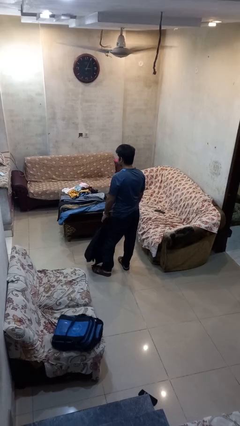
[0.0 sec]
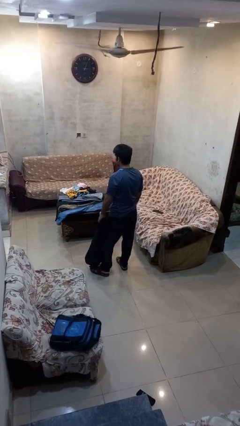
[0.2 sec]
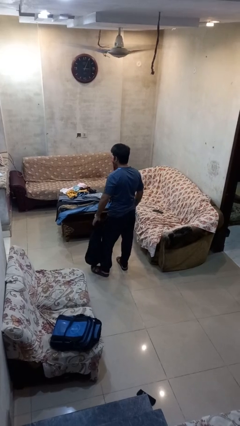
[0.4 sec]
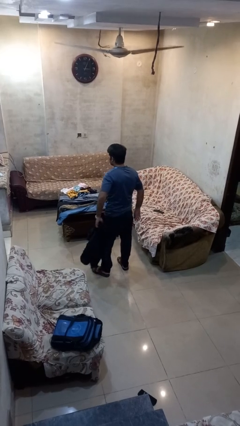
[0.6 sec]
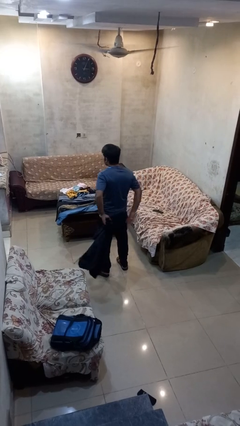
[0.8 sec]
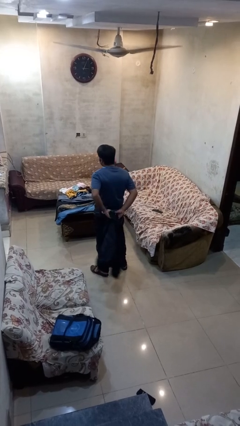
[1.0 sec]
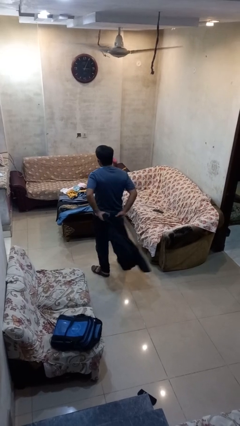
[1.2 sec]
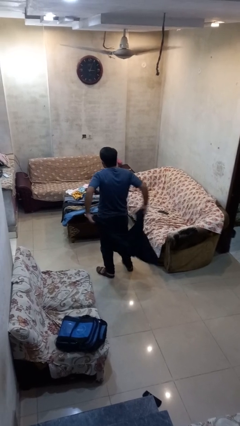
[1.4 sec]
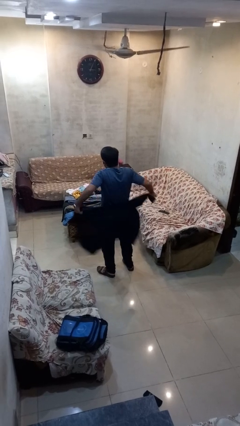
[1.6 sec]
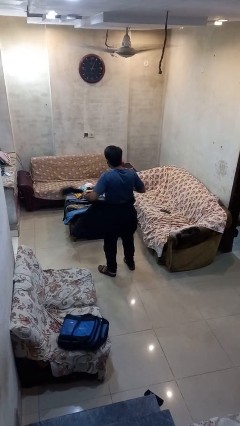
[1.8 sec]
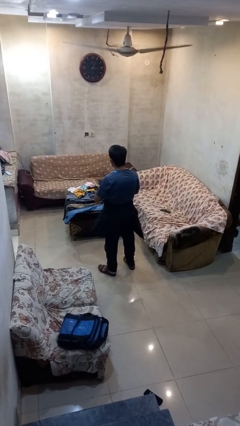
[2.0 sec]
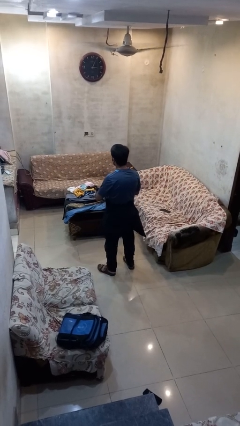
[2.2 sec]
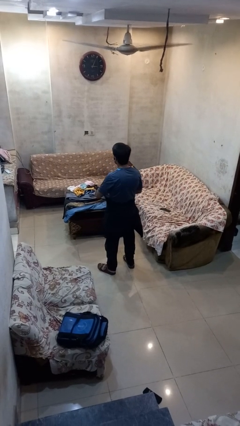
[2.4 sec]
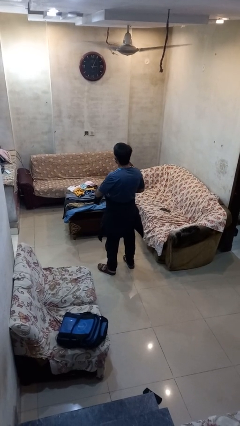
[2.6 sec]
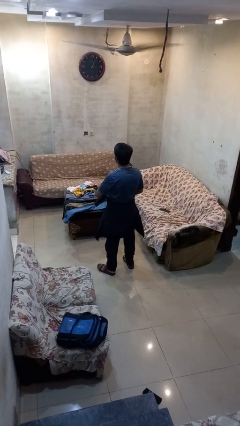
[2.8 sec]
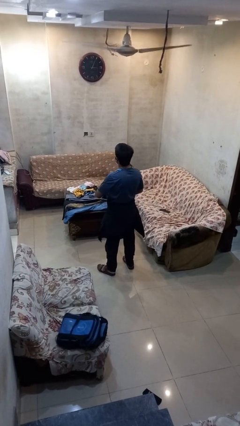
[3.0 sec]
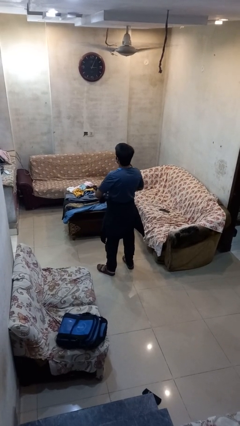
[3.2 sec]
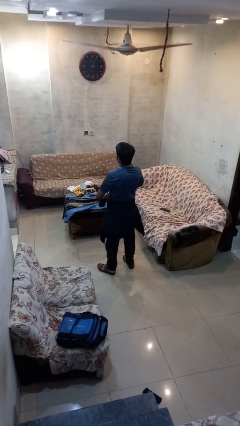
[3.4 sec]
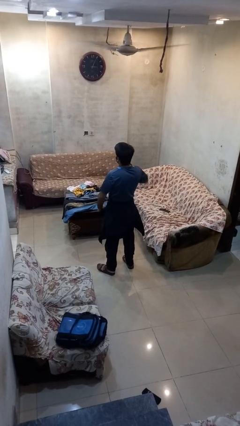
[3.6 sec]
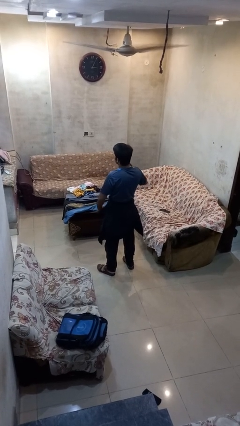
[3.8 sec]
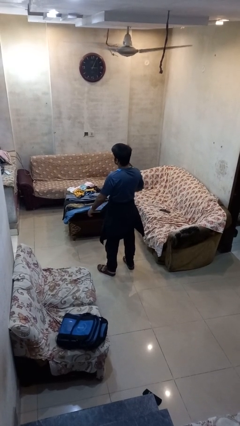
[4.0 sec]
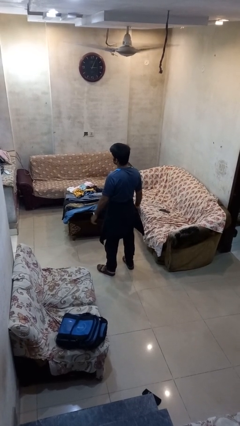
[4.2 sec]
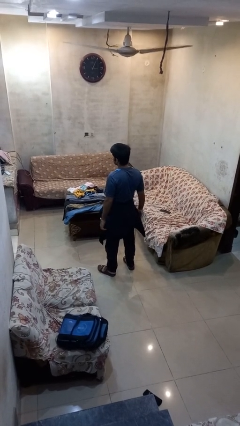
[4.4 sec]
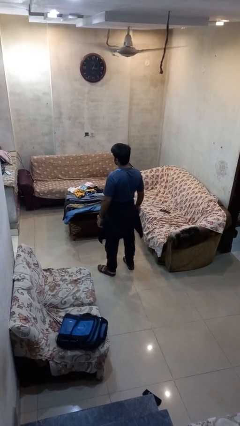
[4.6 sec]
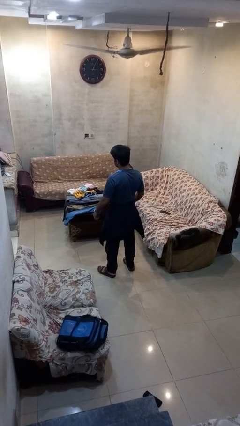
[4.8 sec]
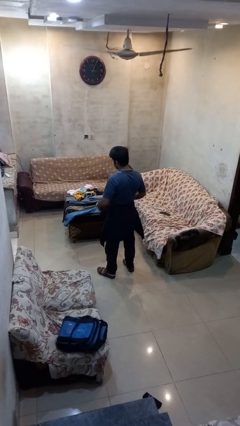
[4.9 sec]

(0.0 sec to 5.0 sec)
person ties jacket around waist

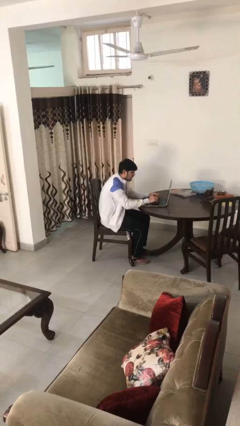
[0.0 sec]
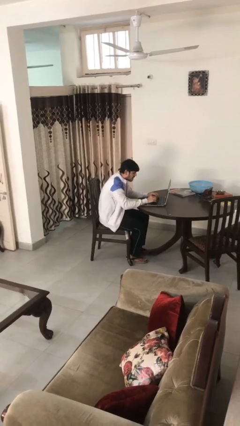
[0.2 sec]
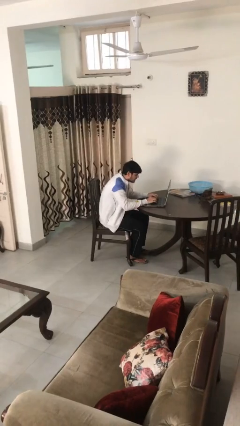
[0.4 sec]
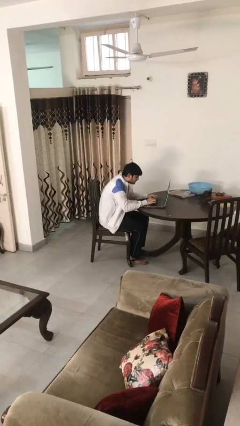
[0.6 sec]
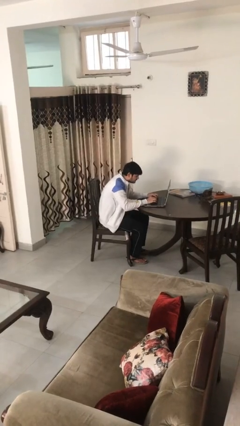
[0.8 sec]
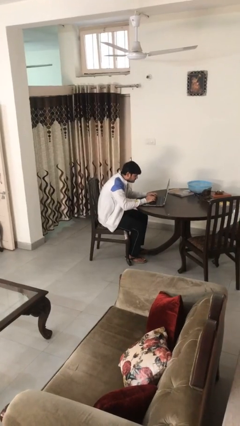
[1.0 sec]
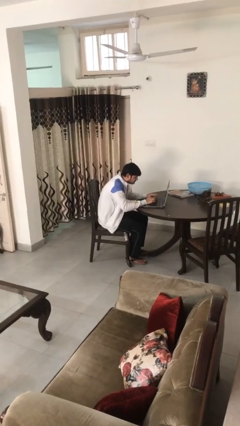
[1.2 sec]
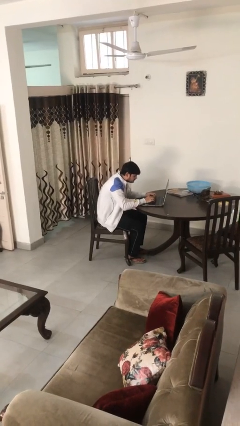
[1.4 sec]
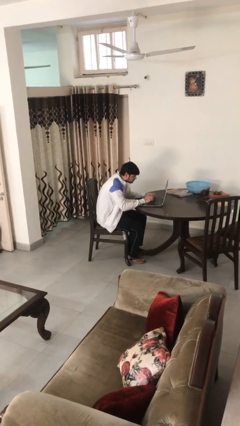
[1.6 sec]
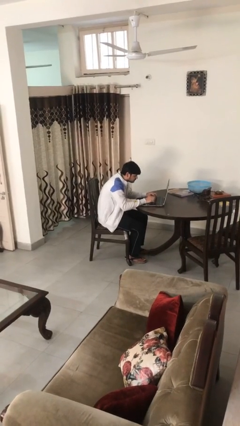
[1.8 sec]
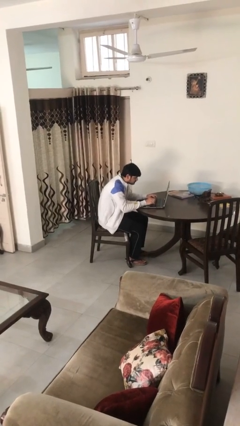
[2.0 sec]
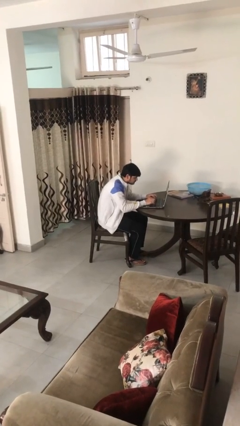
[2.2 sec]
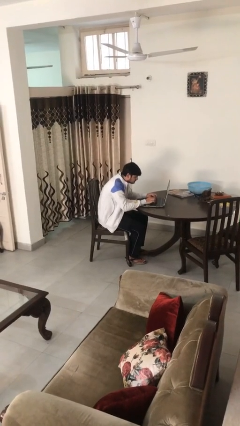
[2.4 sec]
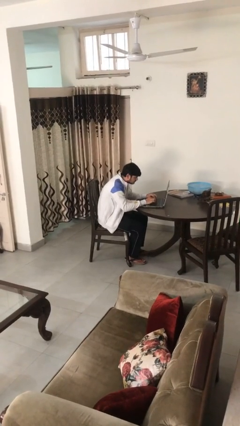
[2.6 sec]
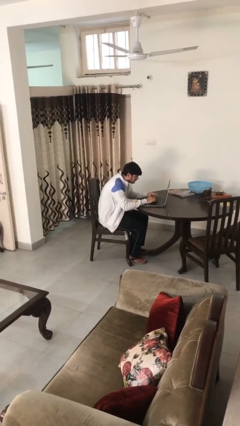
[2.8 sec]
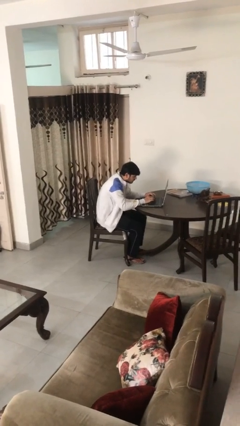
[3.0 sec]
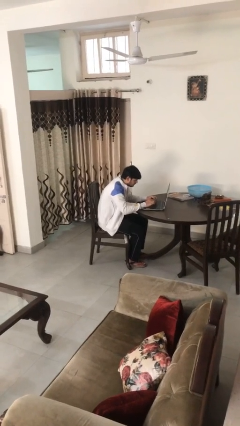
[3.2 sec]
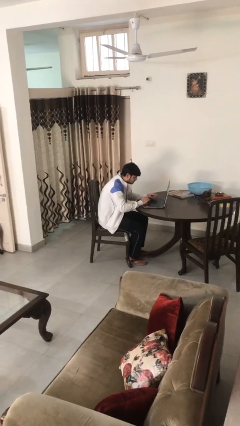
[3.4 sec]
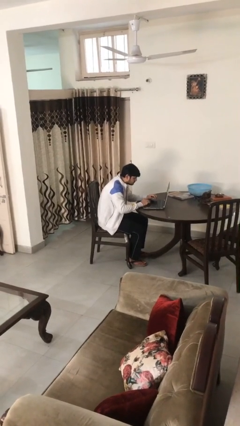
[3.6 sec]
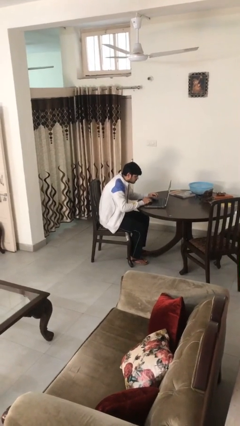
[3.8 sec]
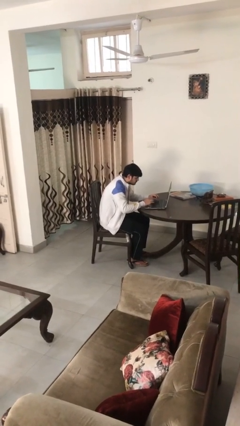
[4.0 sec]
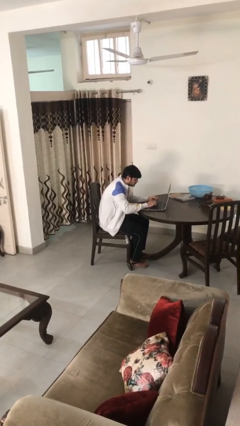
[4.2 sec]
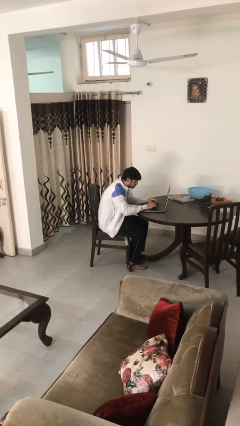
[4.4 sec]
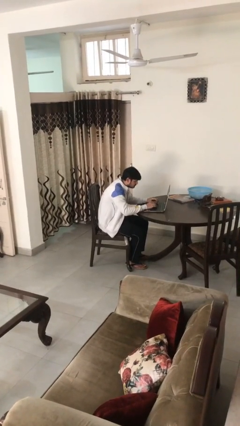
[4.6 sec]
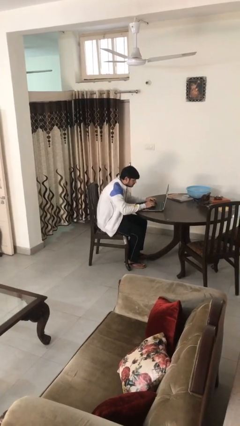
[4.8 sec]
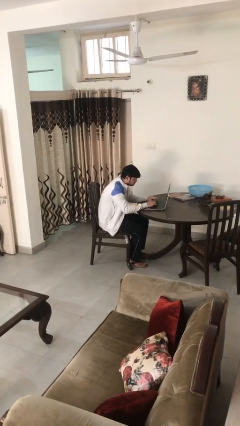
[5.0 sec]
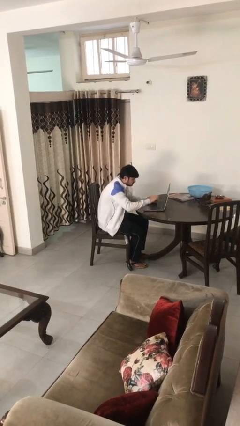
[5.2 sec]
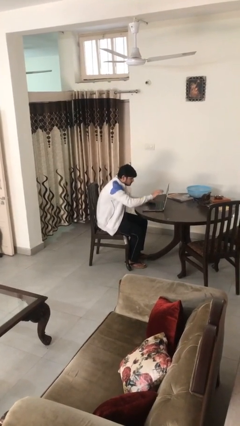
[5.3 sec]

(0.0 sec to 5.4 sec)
person interacts with laptop

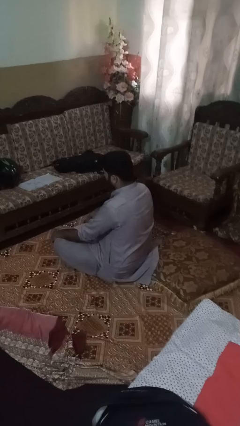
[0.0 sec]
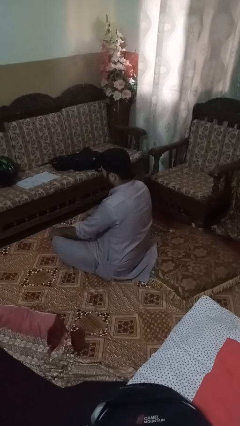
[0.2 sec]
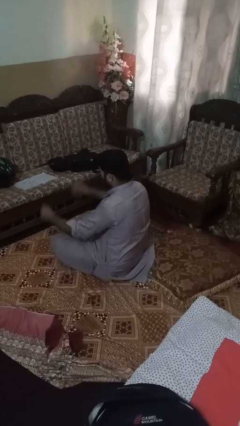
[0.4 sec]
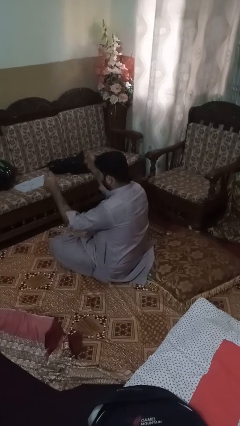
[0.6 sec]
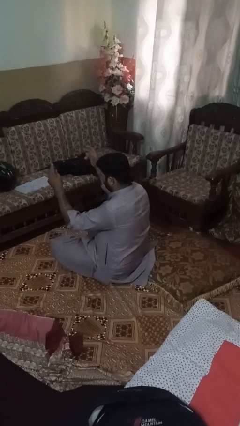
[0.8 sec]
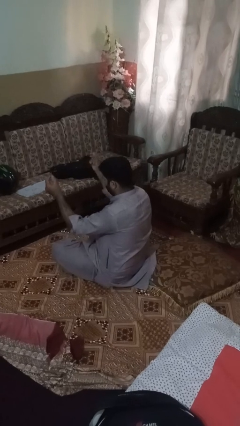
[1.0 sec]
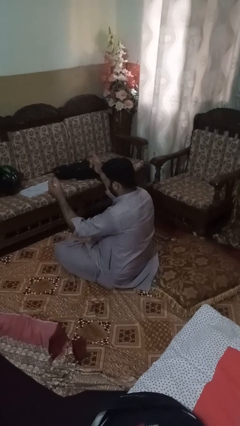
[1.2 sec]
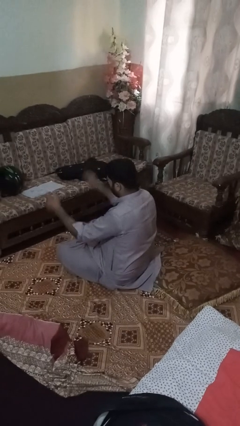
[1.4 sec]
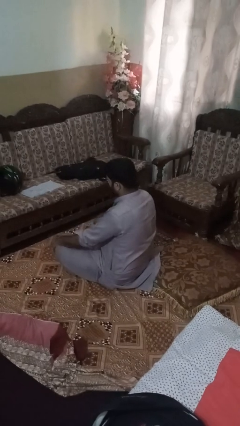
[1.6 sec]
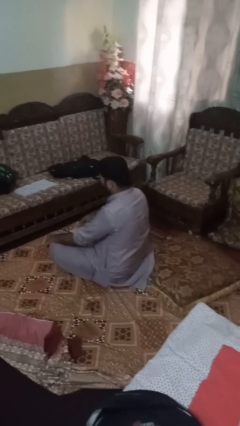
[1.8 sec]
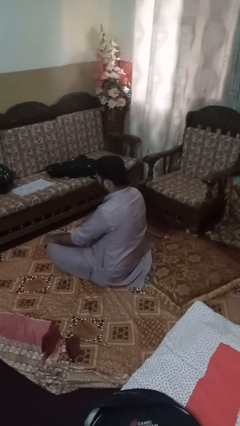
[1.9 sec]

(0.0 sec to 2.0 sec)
person snaps fingers

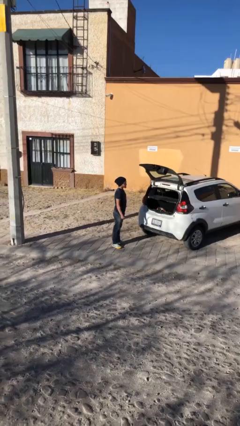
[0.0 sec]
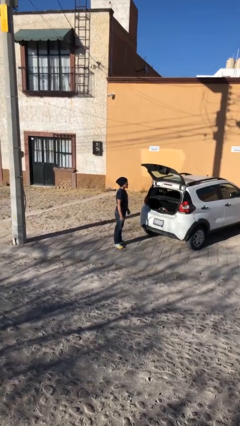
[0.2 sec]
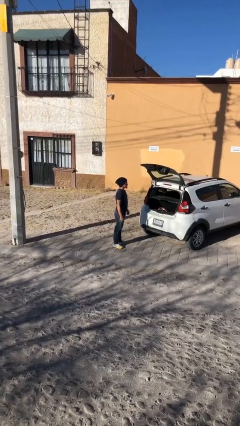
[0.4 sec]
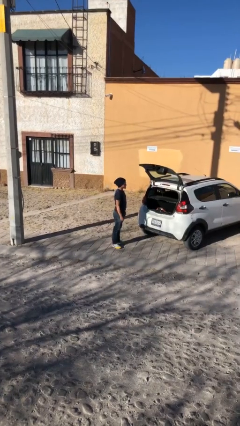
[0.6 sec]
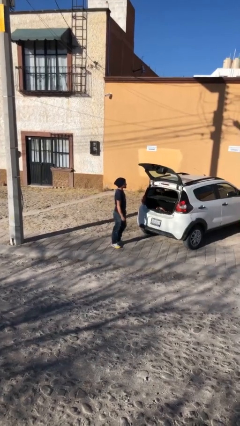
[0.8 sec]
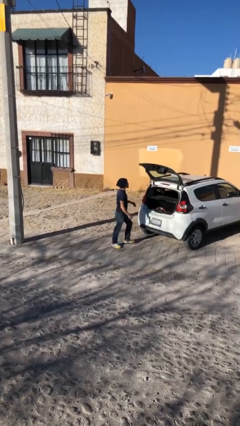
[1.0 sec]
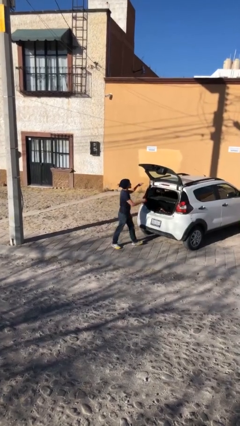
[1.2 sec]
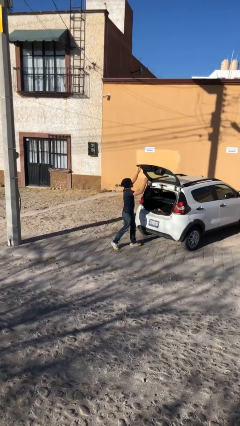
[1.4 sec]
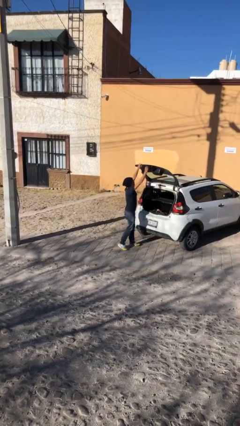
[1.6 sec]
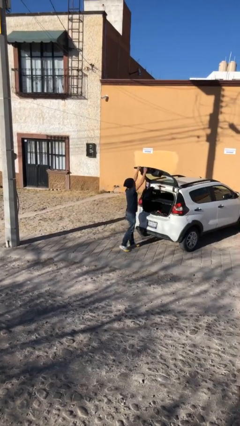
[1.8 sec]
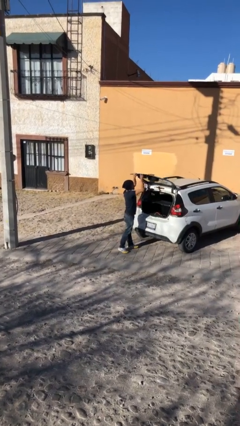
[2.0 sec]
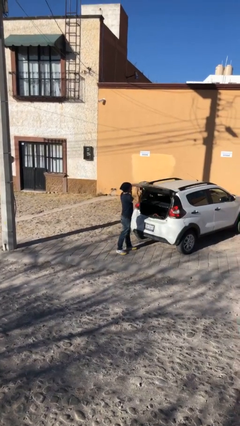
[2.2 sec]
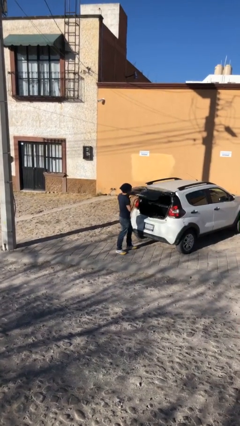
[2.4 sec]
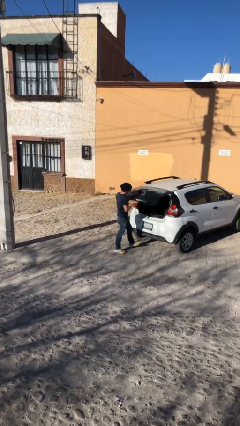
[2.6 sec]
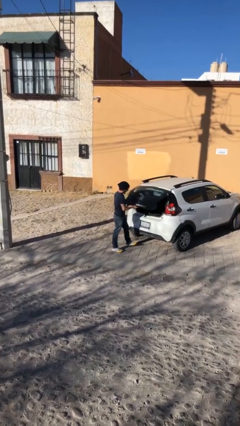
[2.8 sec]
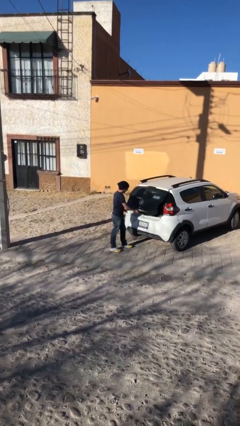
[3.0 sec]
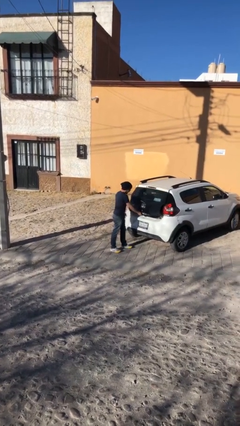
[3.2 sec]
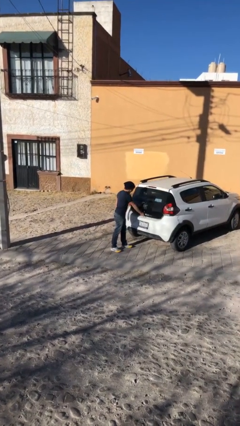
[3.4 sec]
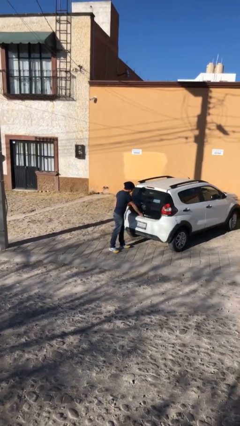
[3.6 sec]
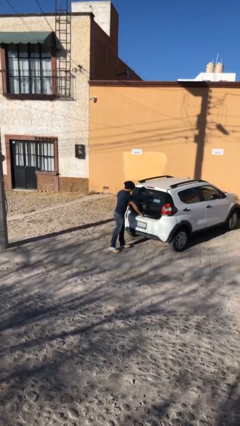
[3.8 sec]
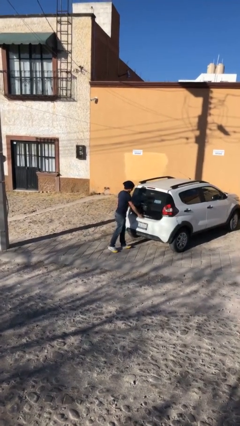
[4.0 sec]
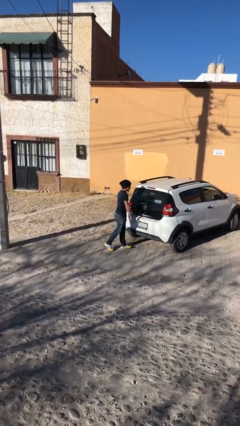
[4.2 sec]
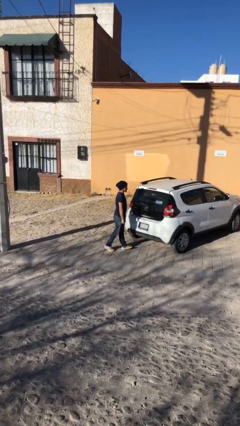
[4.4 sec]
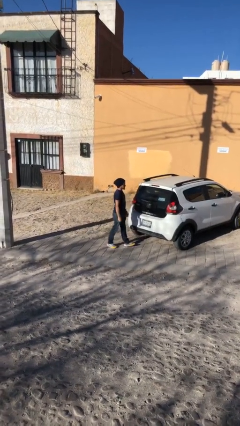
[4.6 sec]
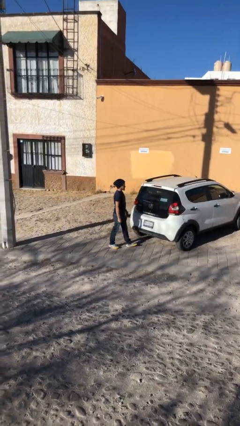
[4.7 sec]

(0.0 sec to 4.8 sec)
person closes car trunk
